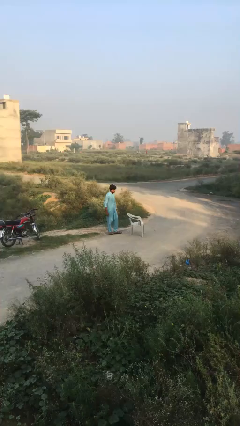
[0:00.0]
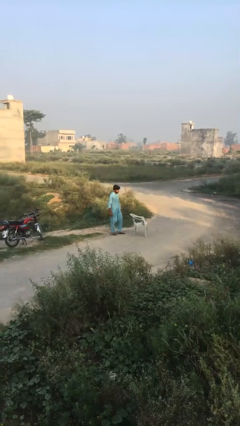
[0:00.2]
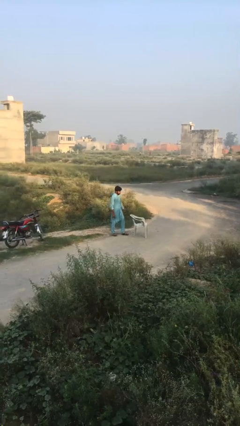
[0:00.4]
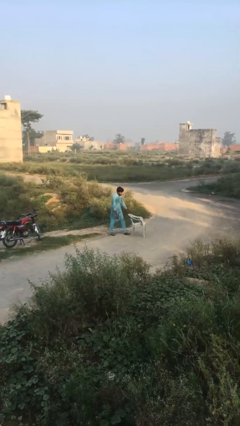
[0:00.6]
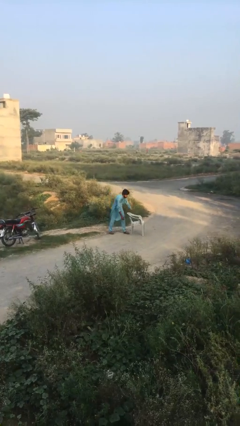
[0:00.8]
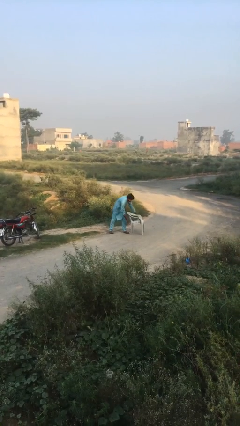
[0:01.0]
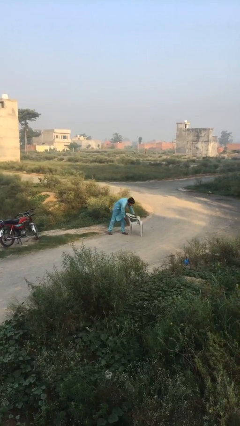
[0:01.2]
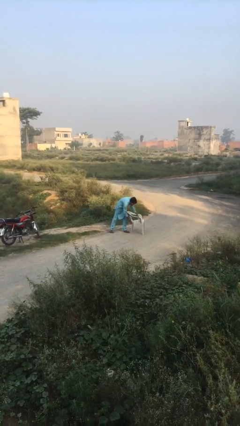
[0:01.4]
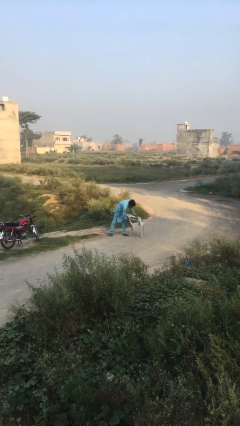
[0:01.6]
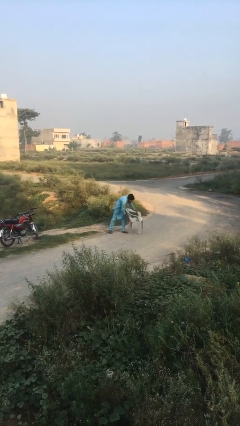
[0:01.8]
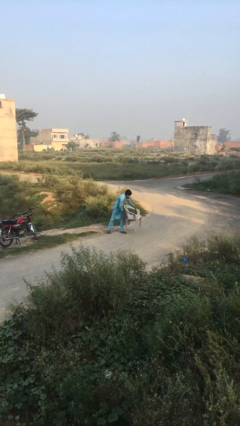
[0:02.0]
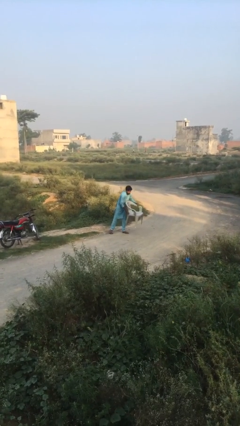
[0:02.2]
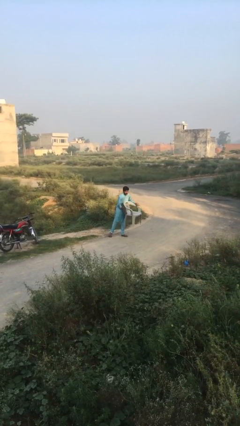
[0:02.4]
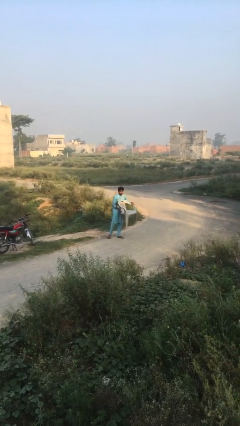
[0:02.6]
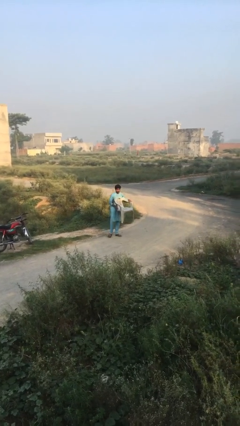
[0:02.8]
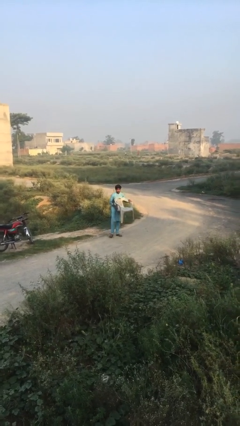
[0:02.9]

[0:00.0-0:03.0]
person picks up object from floor

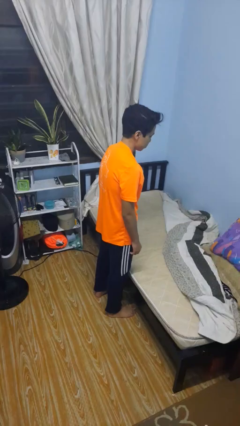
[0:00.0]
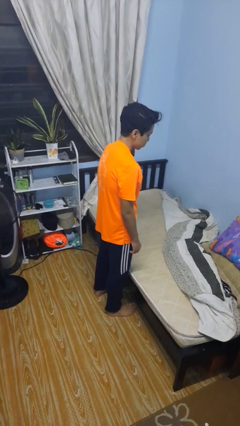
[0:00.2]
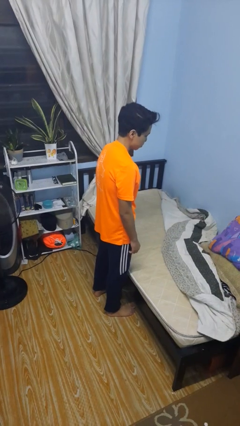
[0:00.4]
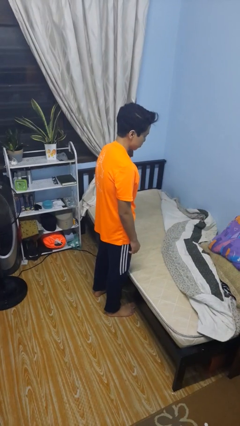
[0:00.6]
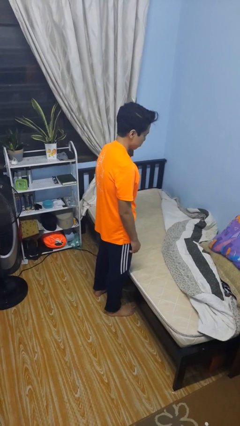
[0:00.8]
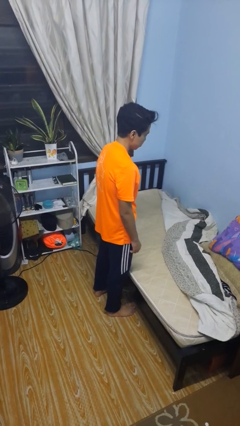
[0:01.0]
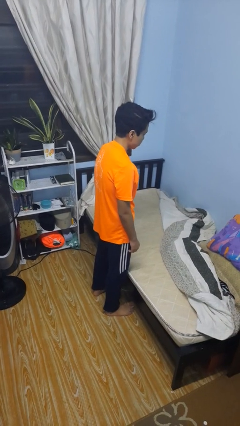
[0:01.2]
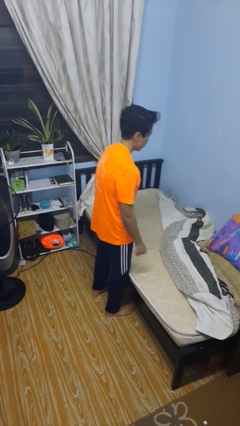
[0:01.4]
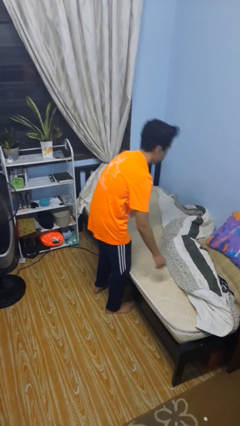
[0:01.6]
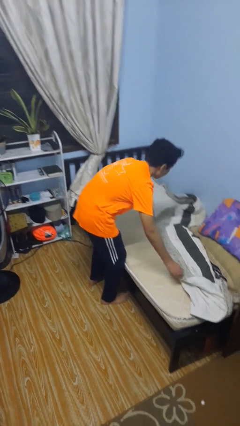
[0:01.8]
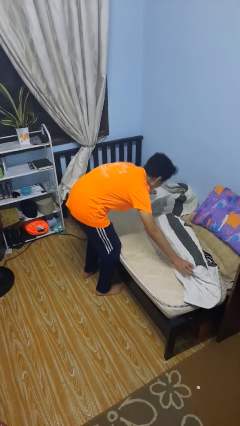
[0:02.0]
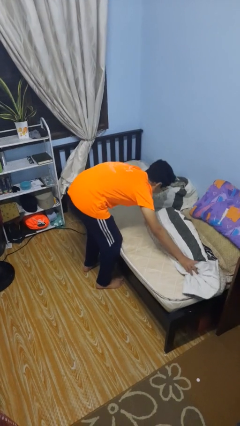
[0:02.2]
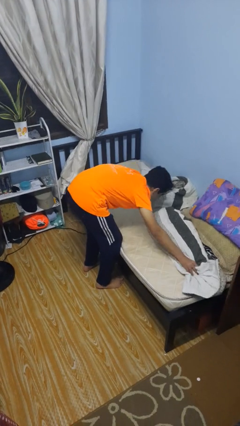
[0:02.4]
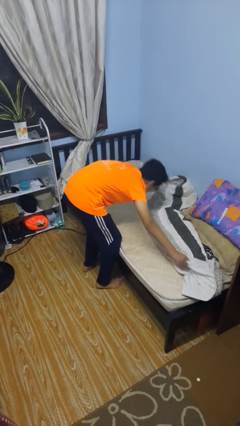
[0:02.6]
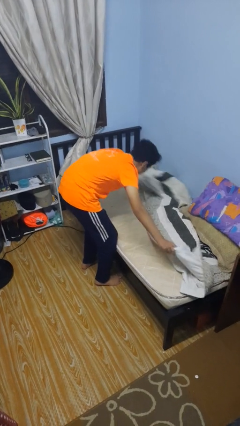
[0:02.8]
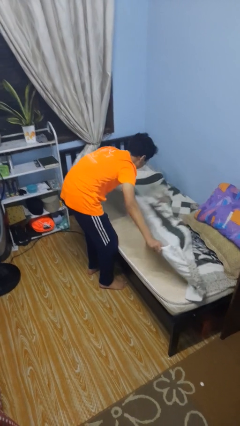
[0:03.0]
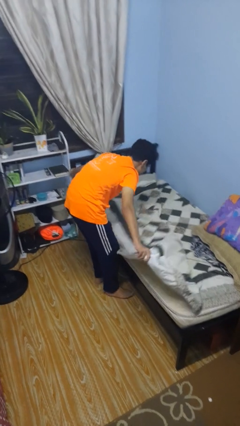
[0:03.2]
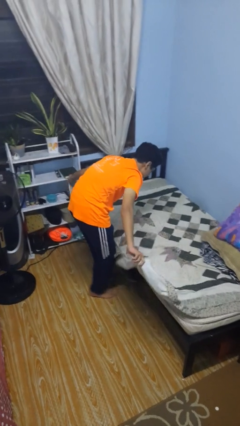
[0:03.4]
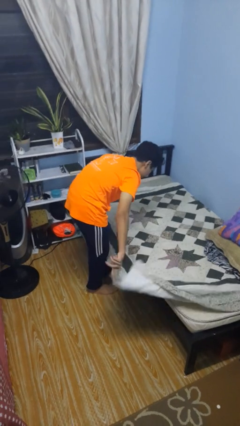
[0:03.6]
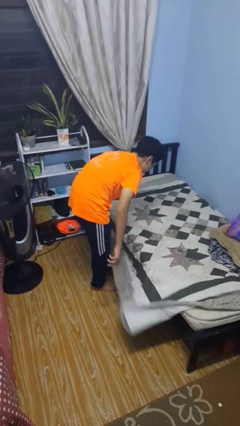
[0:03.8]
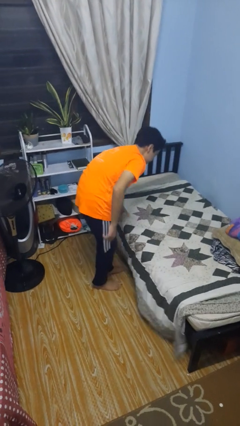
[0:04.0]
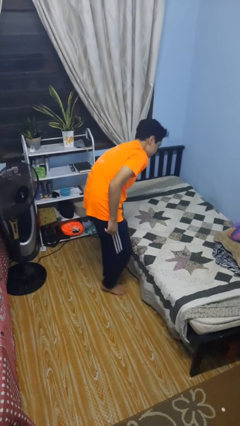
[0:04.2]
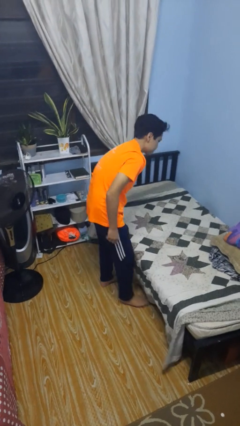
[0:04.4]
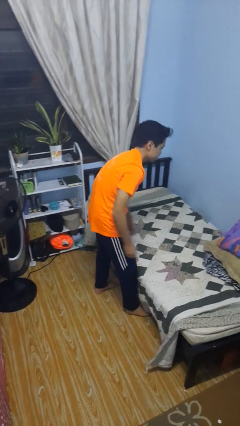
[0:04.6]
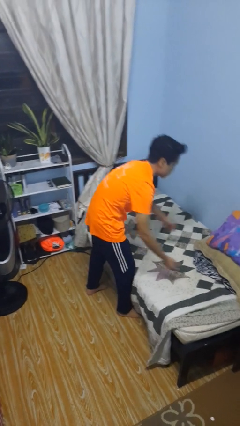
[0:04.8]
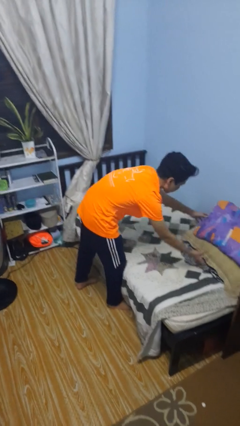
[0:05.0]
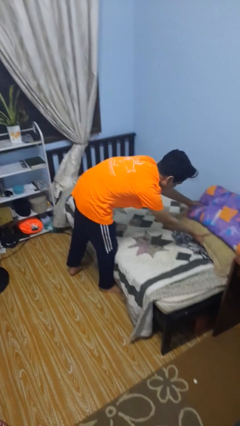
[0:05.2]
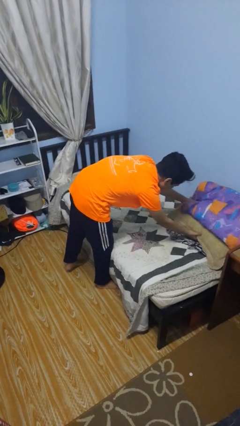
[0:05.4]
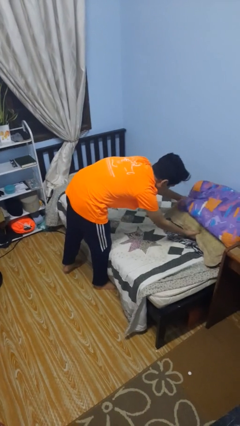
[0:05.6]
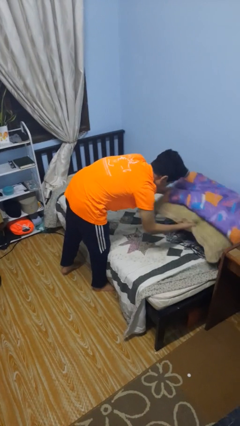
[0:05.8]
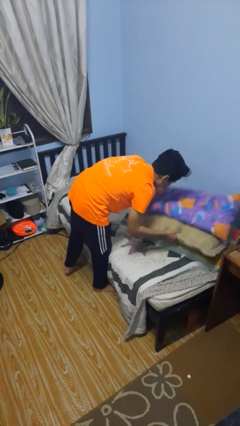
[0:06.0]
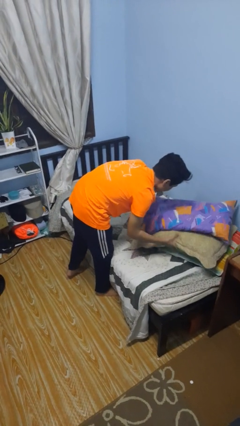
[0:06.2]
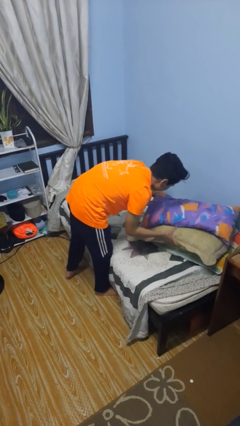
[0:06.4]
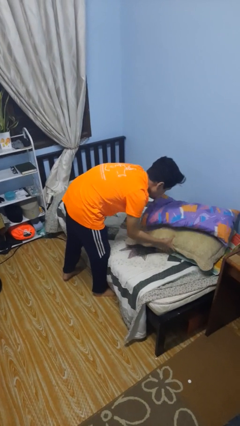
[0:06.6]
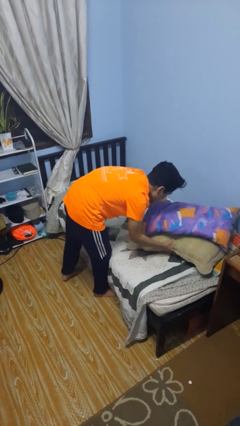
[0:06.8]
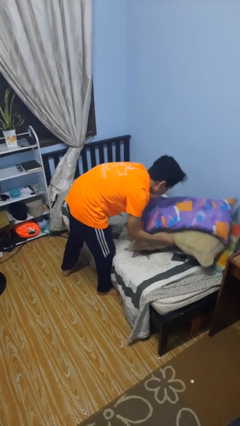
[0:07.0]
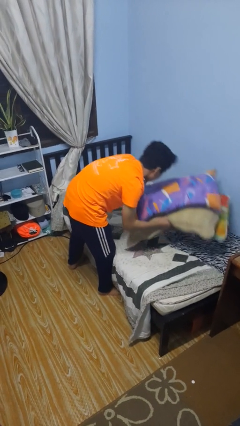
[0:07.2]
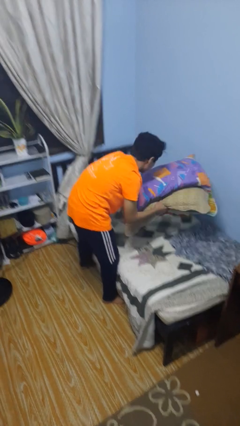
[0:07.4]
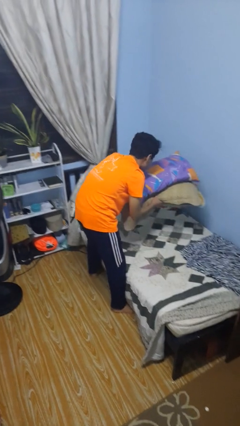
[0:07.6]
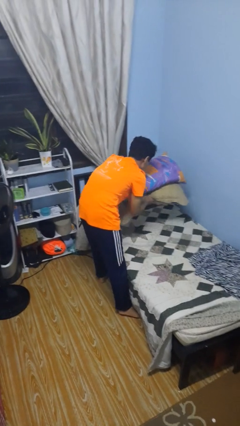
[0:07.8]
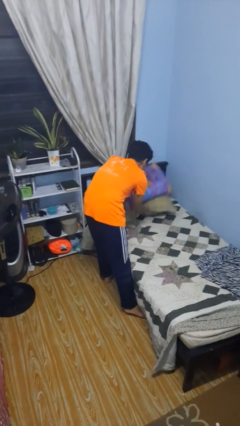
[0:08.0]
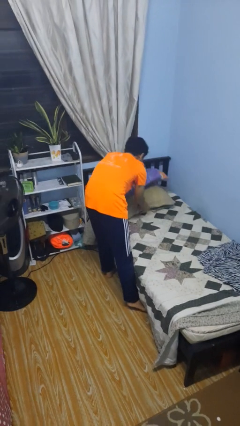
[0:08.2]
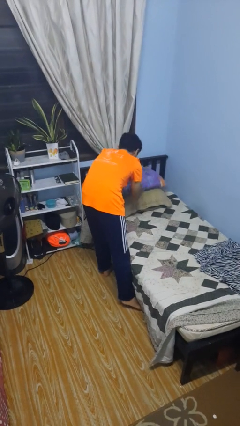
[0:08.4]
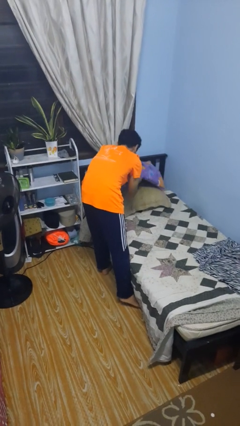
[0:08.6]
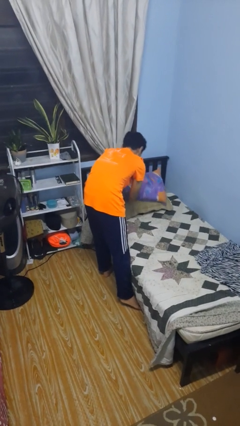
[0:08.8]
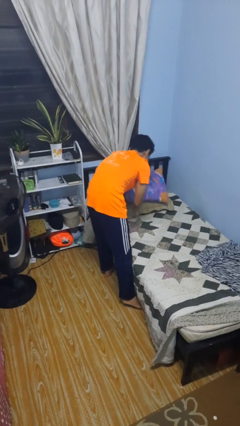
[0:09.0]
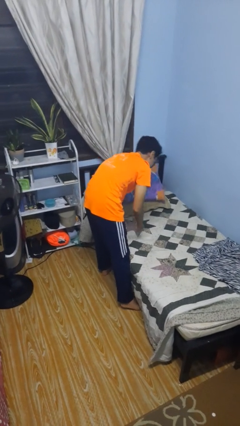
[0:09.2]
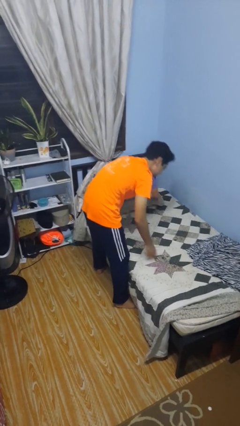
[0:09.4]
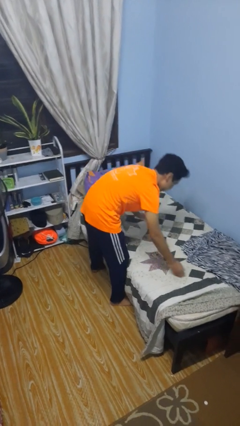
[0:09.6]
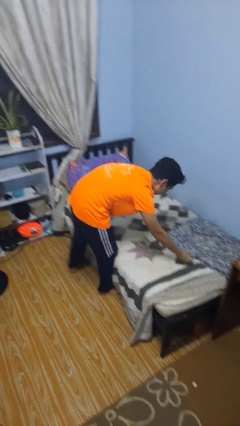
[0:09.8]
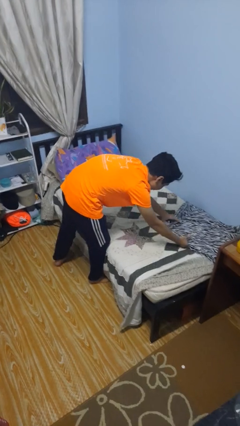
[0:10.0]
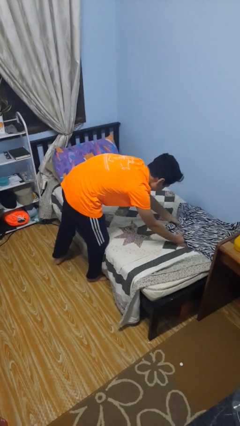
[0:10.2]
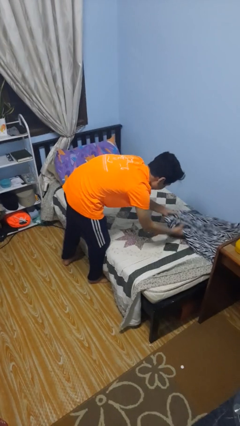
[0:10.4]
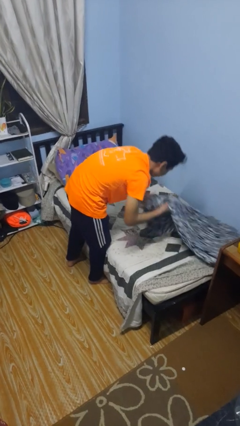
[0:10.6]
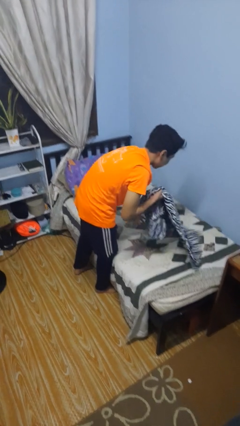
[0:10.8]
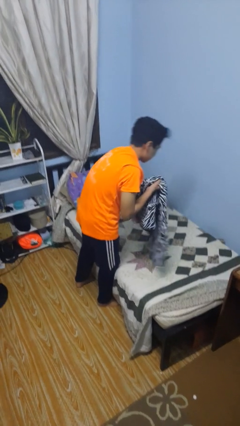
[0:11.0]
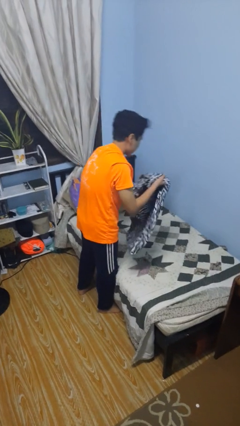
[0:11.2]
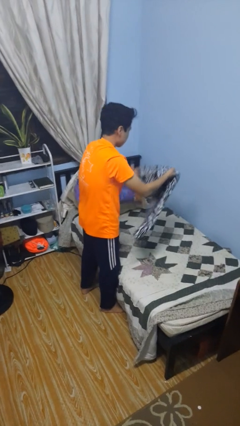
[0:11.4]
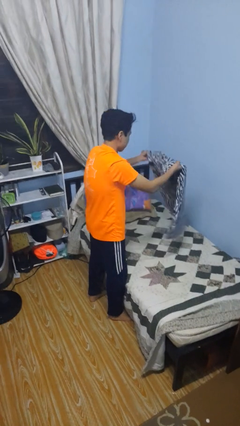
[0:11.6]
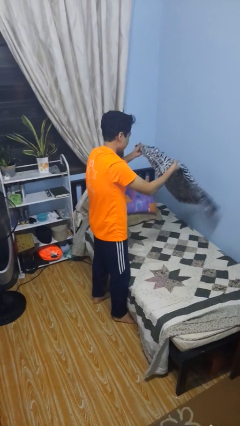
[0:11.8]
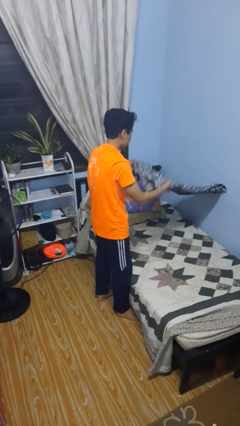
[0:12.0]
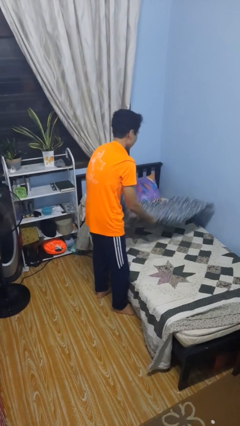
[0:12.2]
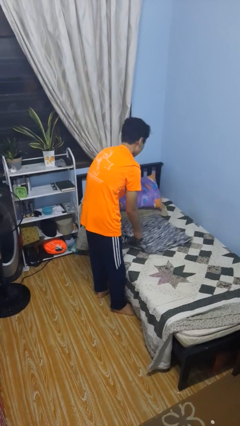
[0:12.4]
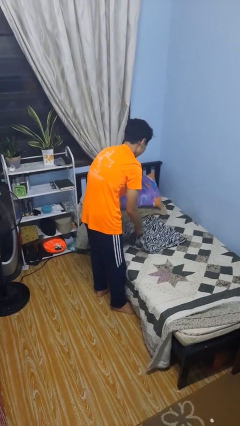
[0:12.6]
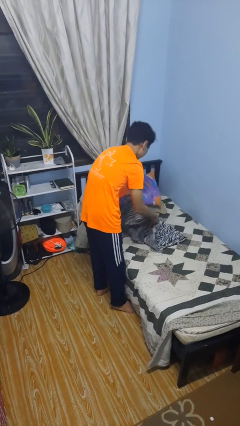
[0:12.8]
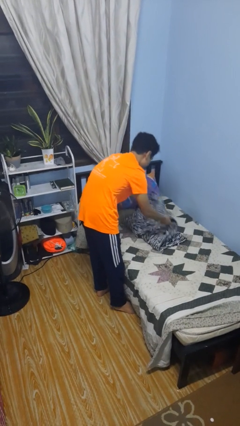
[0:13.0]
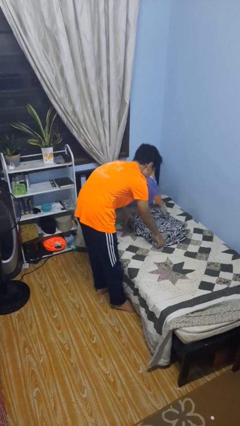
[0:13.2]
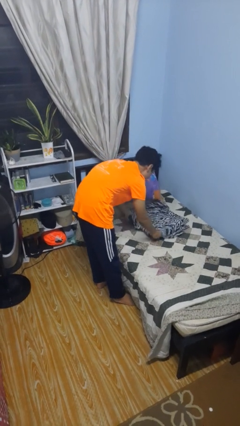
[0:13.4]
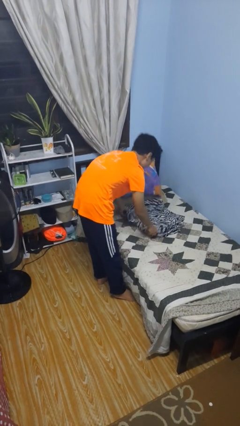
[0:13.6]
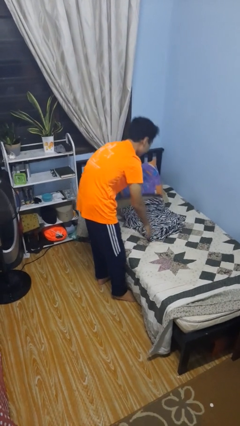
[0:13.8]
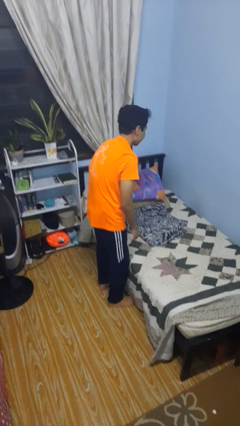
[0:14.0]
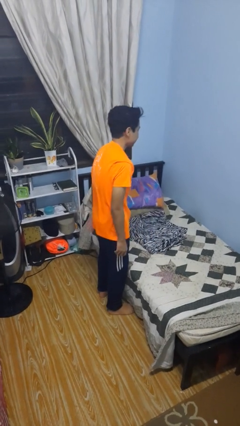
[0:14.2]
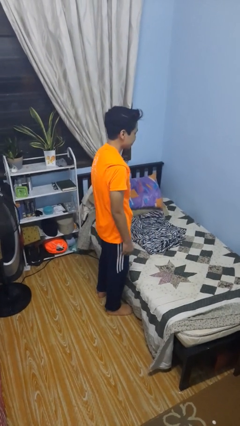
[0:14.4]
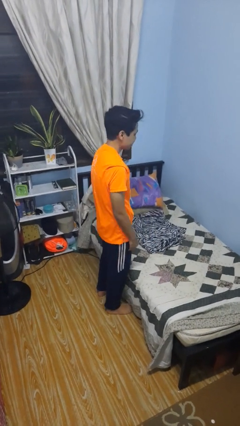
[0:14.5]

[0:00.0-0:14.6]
person makes bed

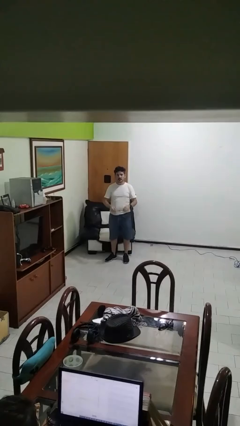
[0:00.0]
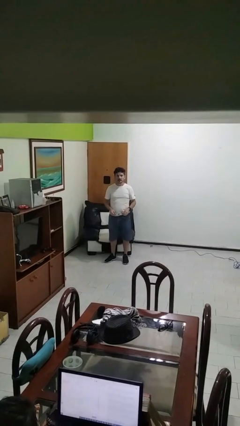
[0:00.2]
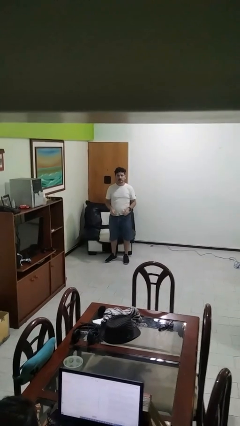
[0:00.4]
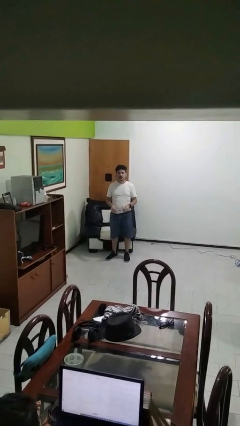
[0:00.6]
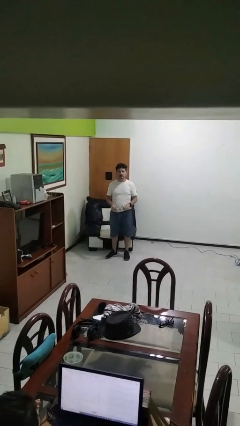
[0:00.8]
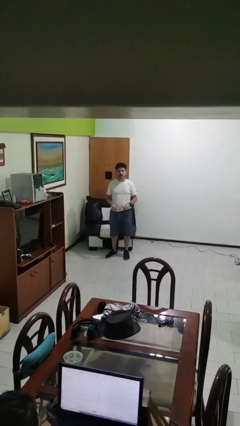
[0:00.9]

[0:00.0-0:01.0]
person takes off glasses
